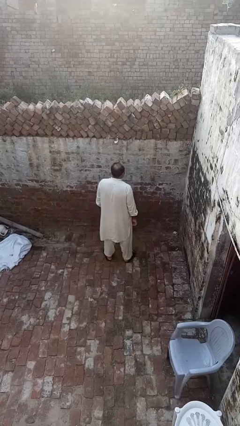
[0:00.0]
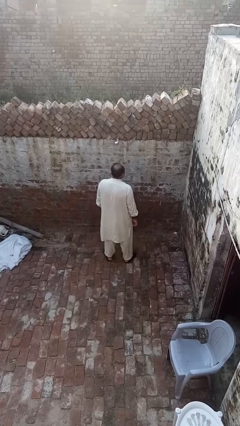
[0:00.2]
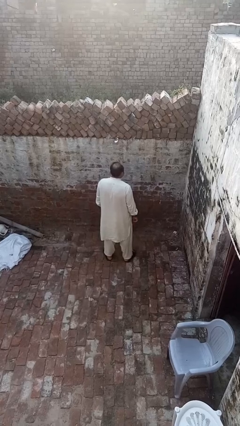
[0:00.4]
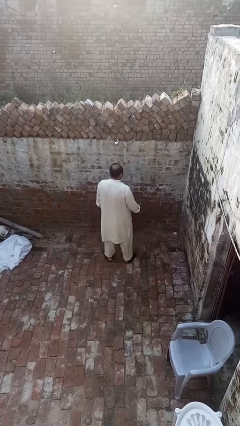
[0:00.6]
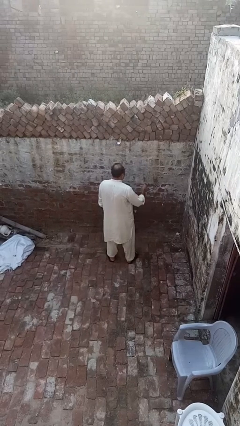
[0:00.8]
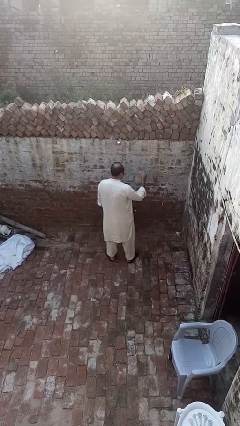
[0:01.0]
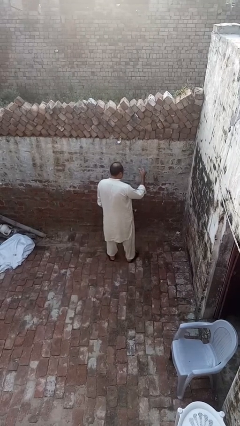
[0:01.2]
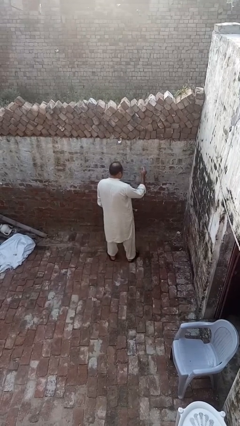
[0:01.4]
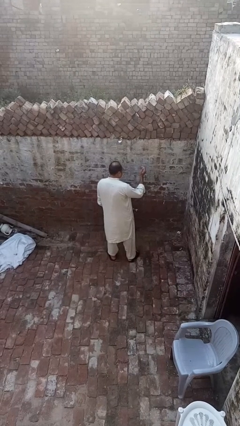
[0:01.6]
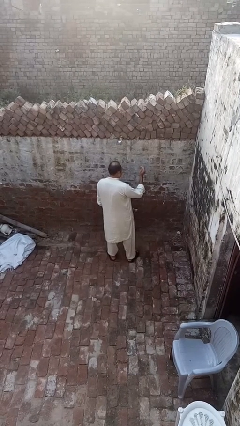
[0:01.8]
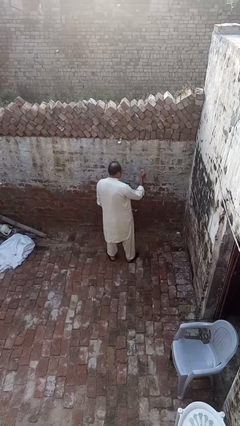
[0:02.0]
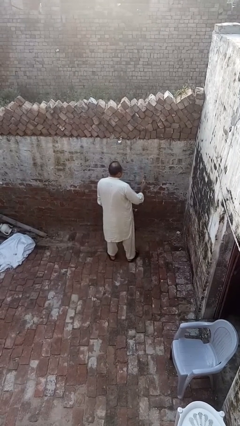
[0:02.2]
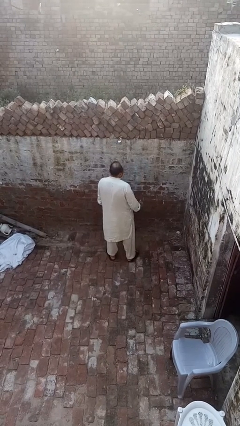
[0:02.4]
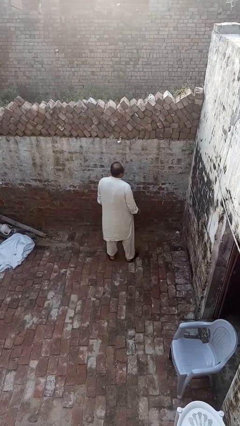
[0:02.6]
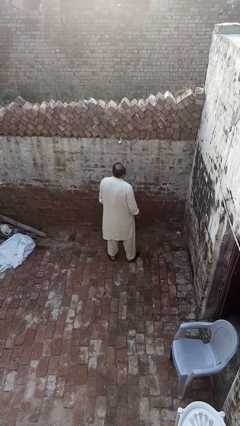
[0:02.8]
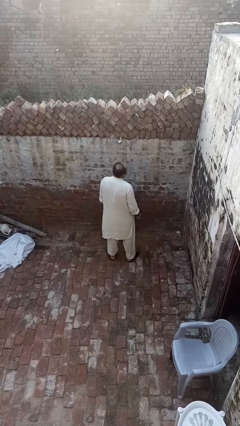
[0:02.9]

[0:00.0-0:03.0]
person snaps fingers

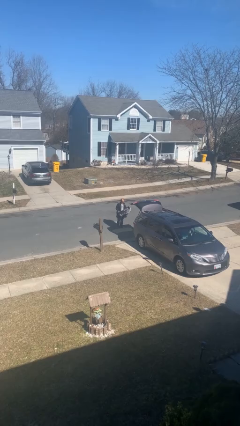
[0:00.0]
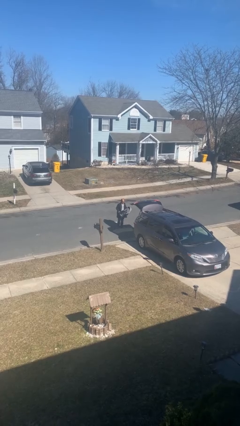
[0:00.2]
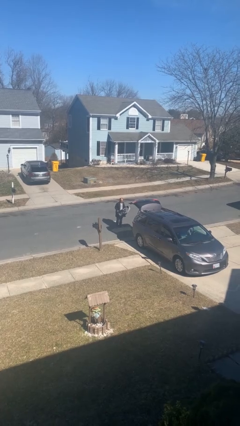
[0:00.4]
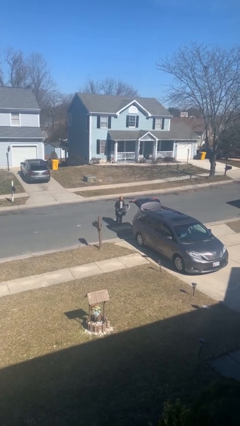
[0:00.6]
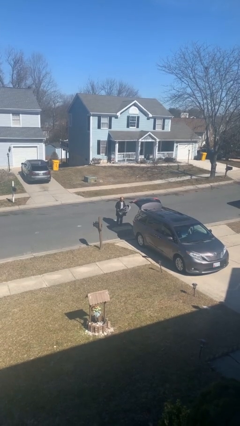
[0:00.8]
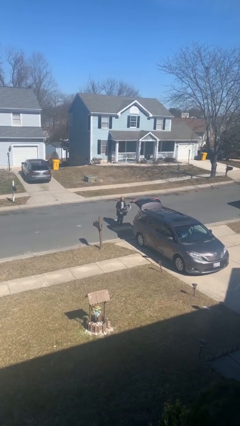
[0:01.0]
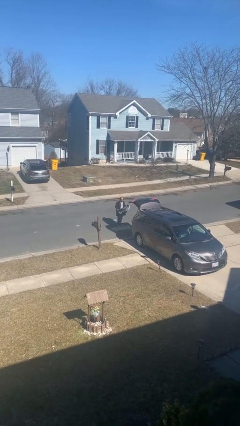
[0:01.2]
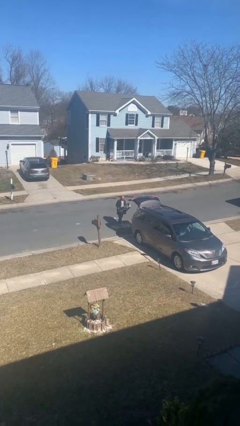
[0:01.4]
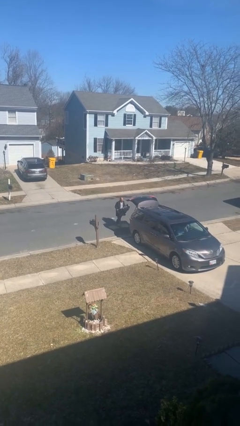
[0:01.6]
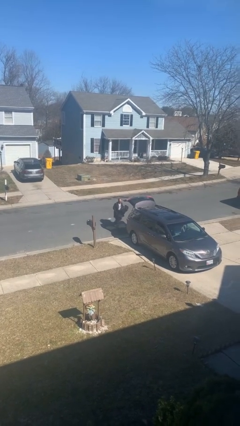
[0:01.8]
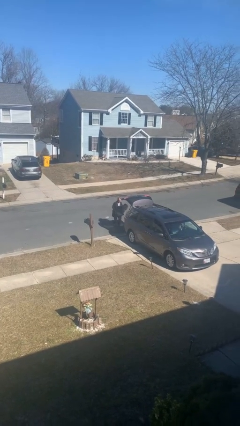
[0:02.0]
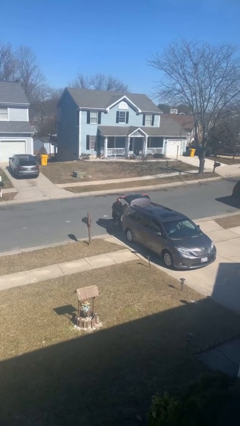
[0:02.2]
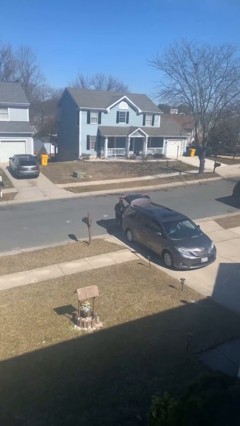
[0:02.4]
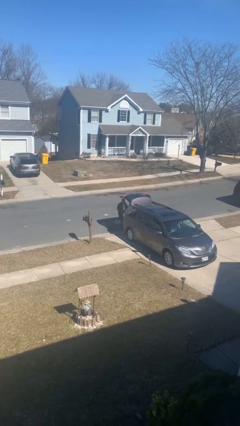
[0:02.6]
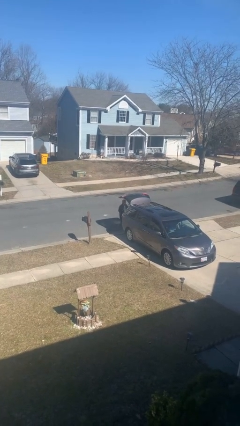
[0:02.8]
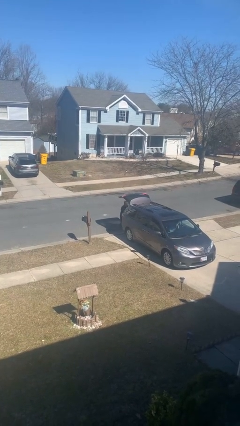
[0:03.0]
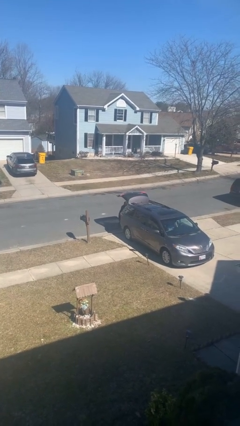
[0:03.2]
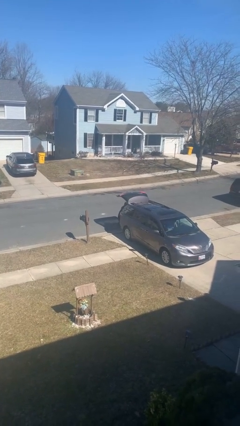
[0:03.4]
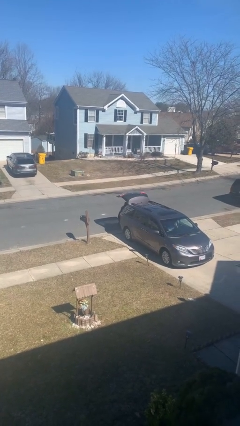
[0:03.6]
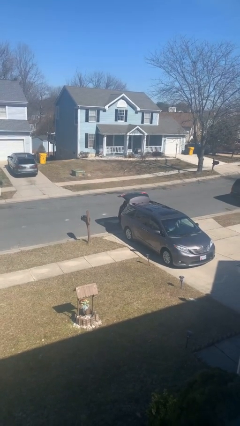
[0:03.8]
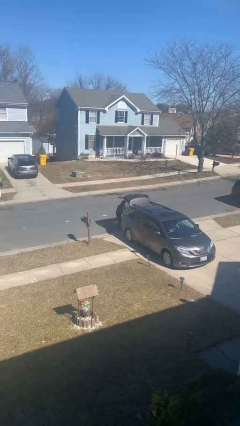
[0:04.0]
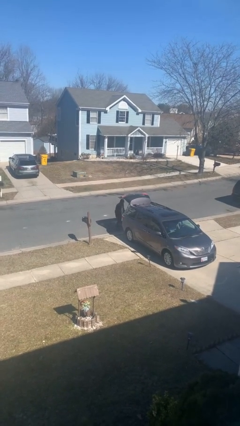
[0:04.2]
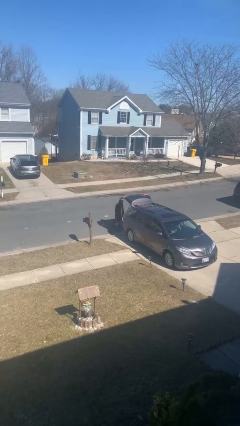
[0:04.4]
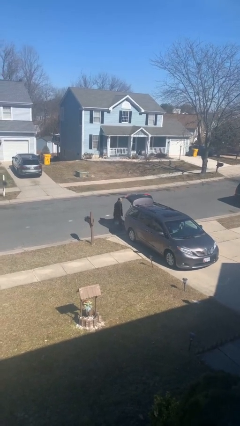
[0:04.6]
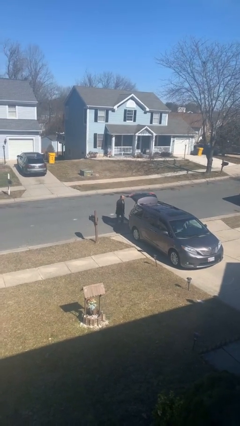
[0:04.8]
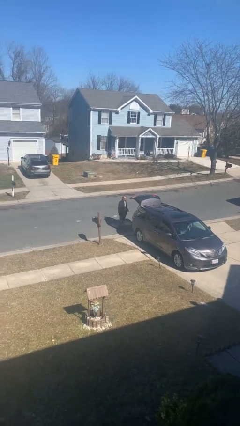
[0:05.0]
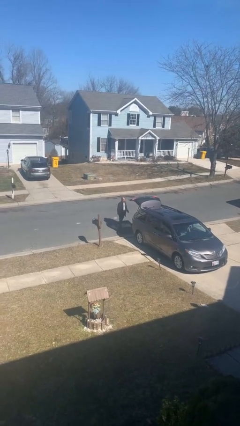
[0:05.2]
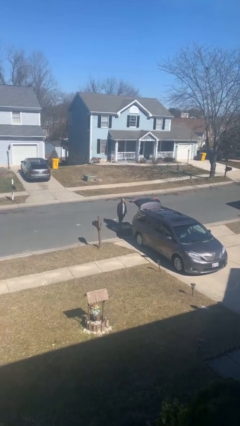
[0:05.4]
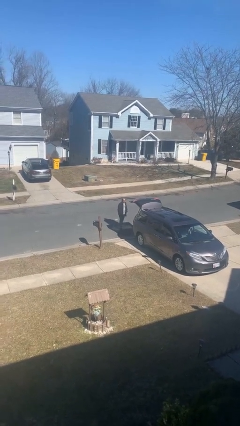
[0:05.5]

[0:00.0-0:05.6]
person loads car

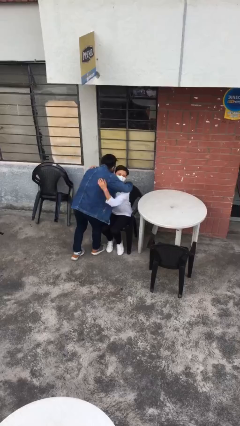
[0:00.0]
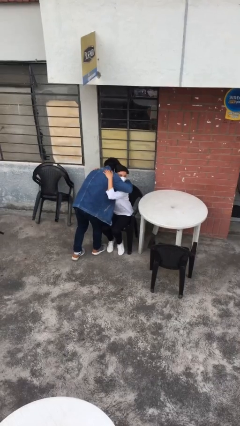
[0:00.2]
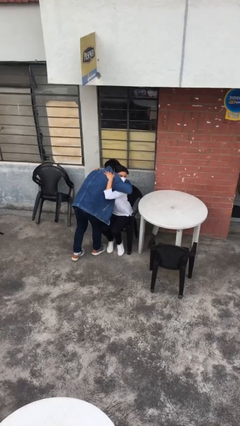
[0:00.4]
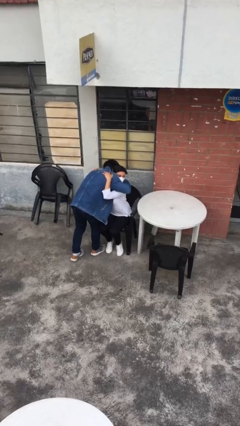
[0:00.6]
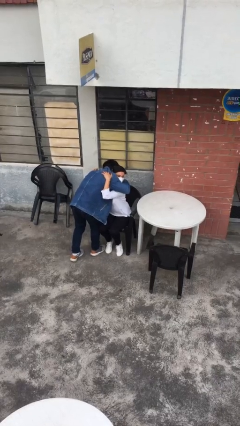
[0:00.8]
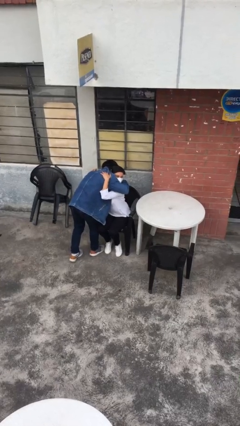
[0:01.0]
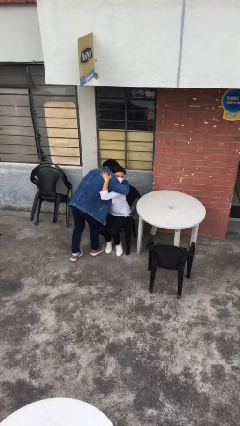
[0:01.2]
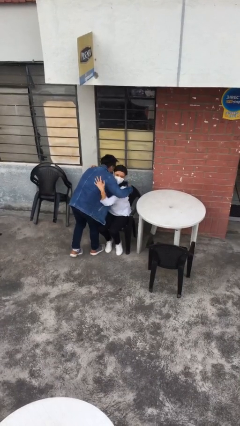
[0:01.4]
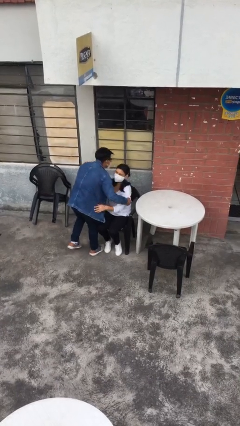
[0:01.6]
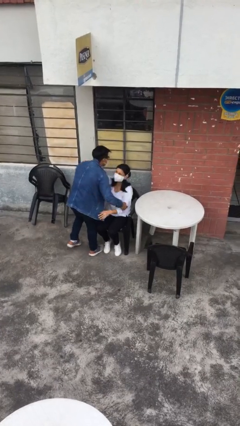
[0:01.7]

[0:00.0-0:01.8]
person embraces person

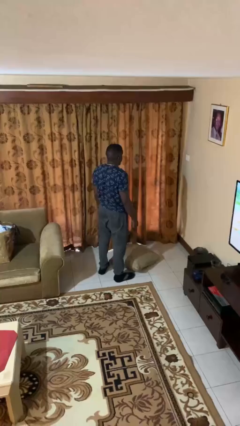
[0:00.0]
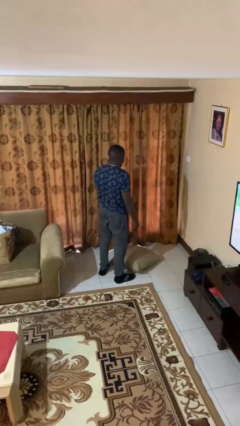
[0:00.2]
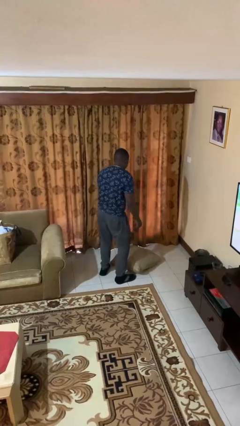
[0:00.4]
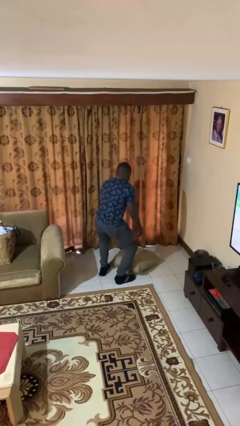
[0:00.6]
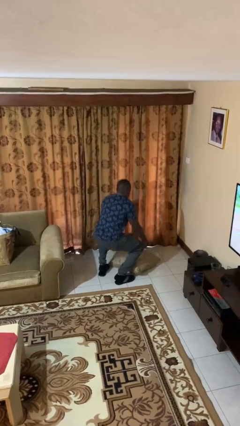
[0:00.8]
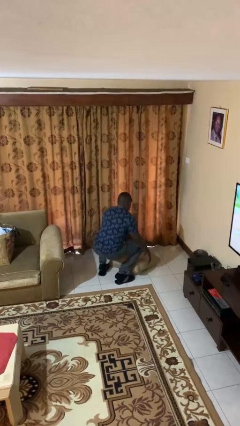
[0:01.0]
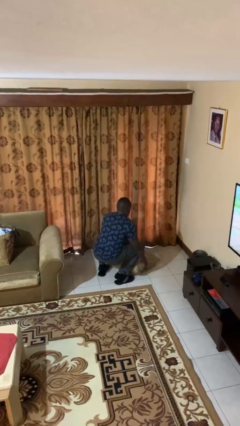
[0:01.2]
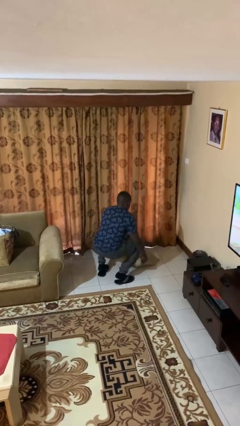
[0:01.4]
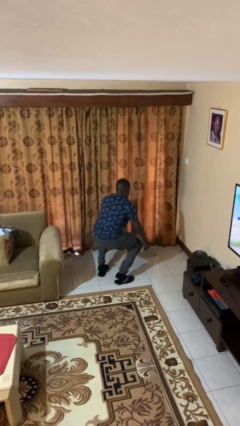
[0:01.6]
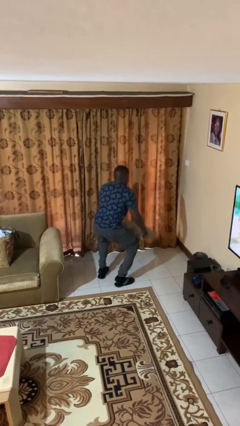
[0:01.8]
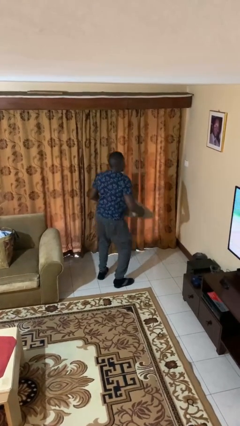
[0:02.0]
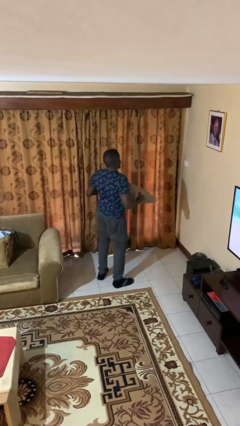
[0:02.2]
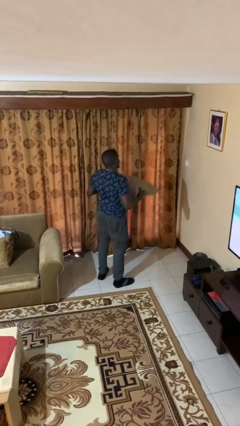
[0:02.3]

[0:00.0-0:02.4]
person picks up object from floor

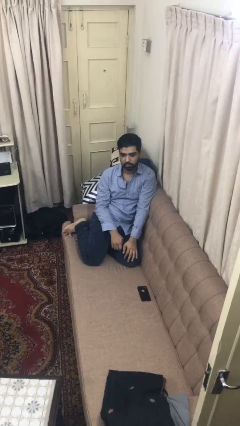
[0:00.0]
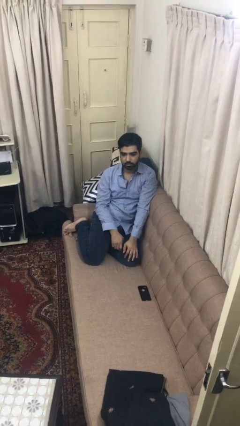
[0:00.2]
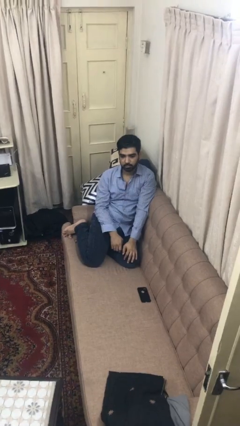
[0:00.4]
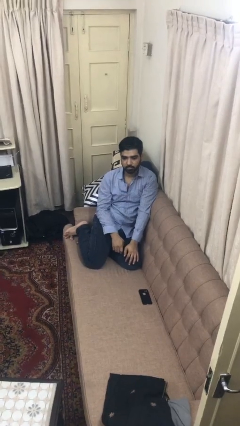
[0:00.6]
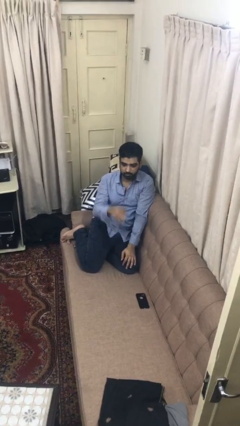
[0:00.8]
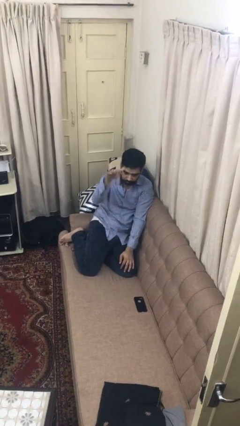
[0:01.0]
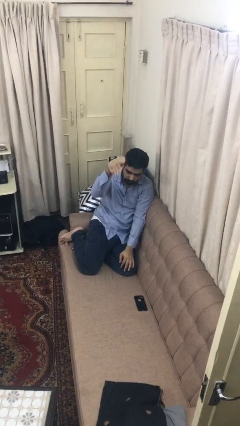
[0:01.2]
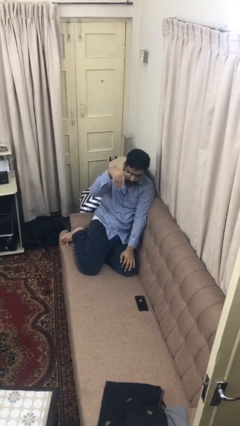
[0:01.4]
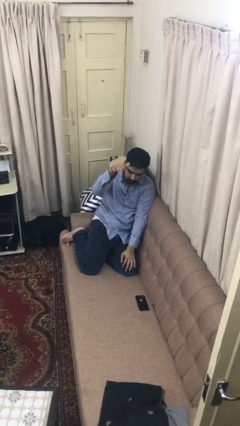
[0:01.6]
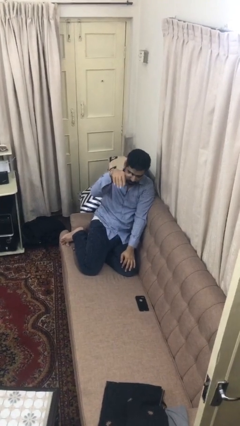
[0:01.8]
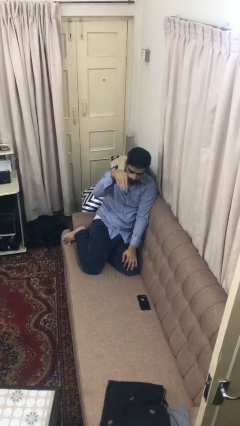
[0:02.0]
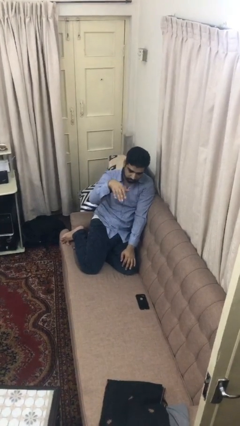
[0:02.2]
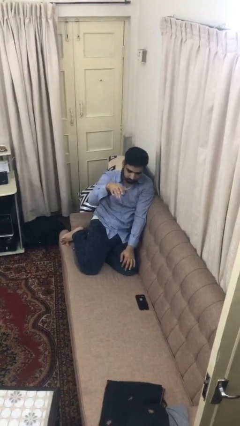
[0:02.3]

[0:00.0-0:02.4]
person gestures come here

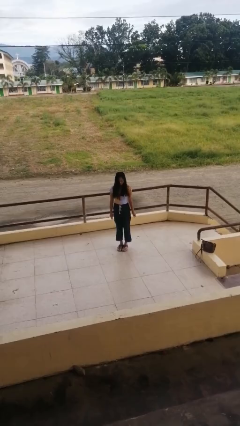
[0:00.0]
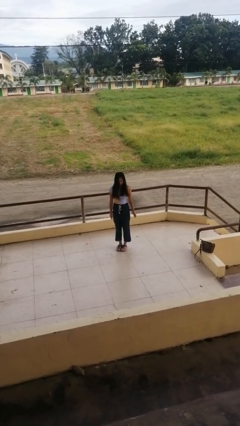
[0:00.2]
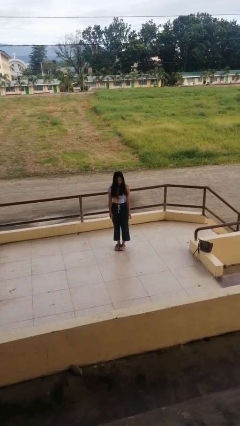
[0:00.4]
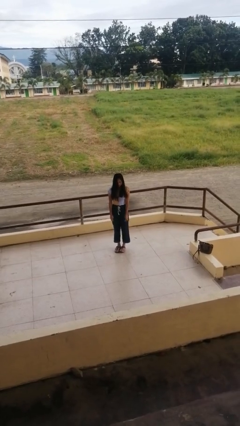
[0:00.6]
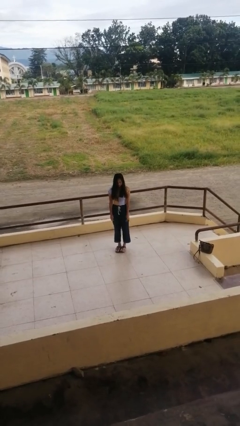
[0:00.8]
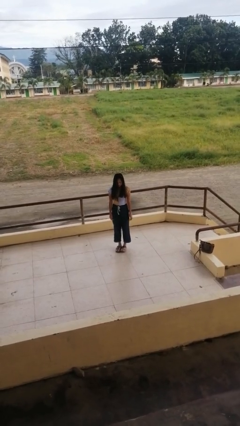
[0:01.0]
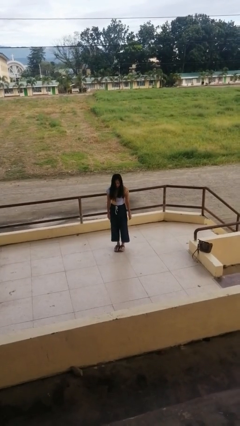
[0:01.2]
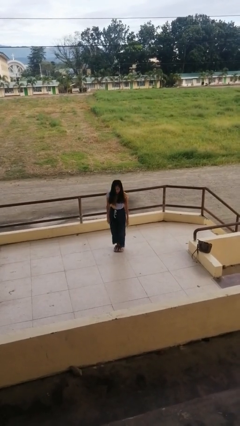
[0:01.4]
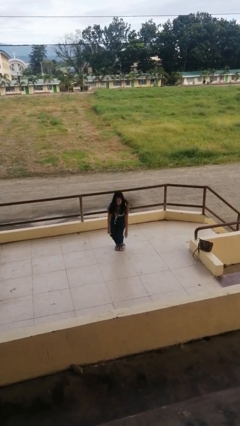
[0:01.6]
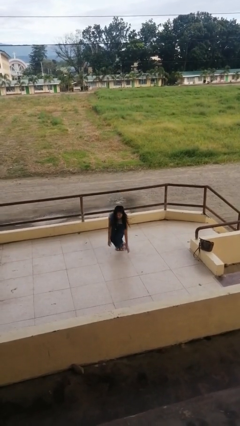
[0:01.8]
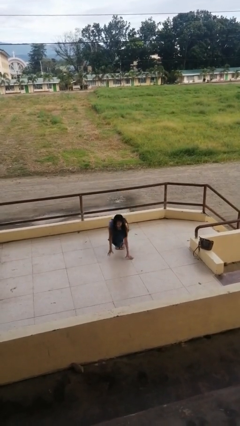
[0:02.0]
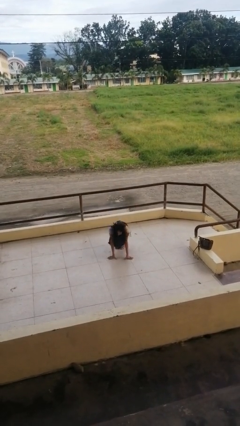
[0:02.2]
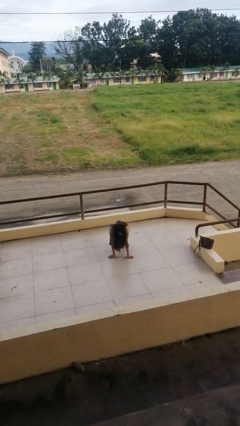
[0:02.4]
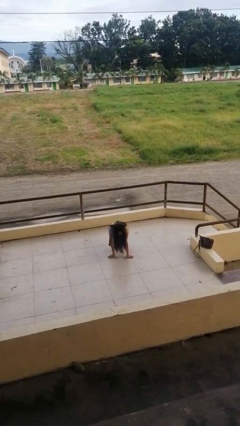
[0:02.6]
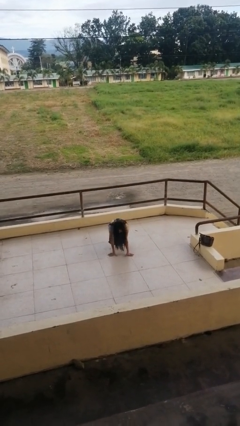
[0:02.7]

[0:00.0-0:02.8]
person falls while standing
